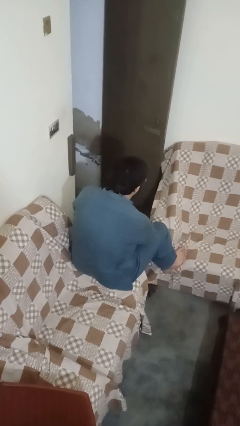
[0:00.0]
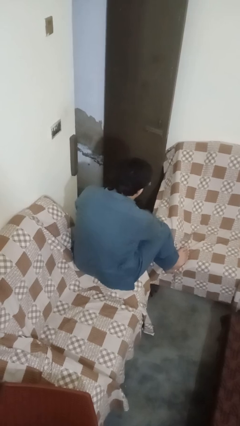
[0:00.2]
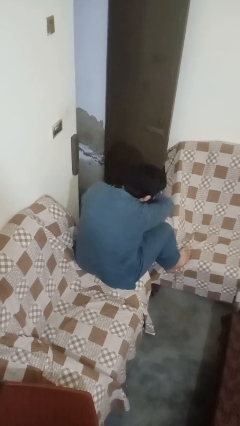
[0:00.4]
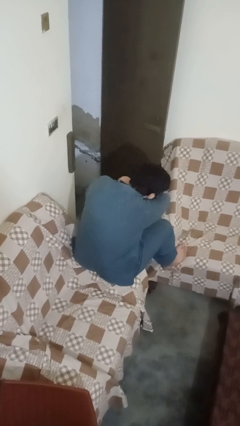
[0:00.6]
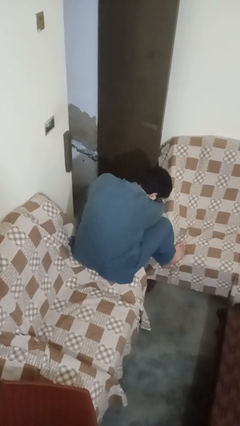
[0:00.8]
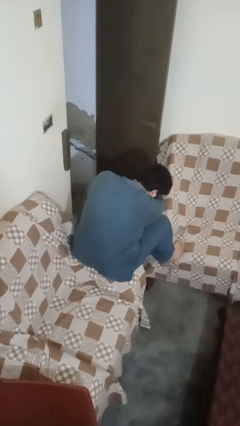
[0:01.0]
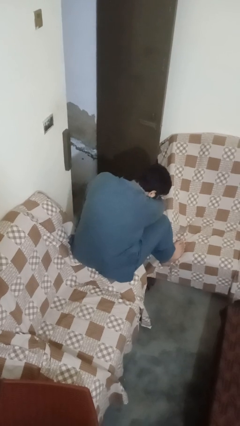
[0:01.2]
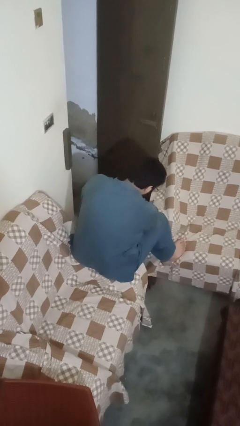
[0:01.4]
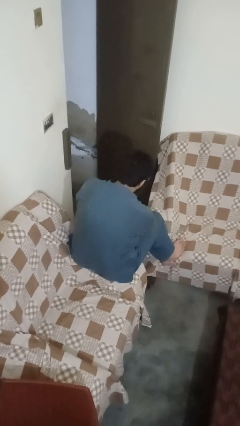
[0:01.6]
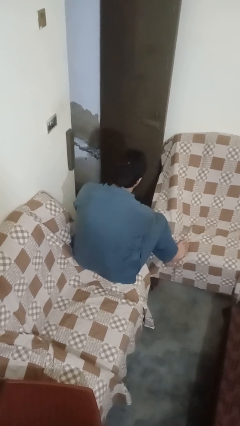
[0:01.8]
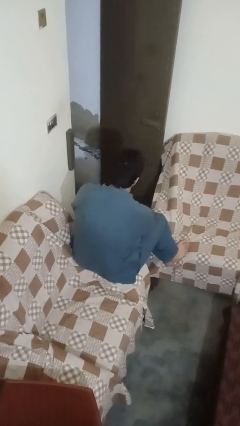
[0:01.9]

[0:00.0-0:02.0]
person sneezes into arm

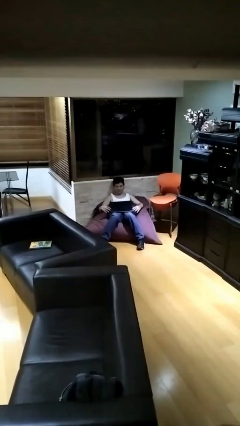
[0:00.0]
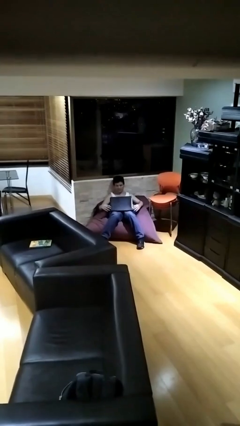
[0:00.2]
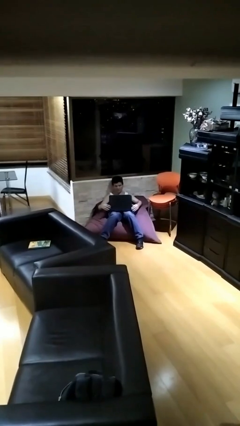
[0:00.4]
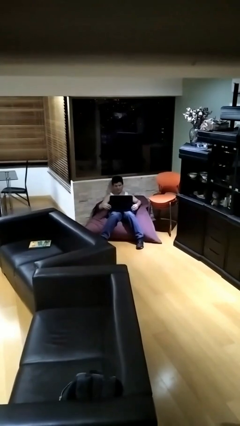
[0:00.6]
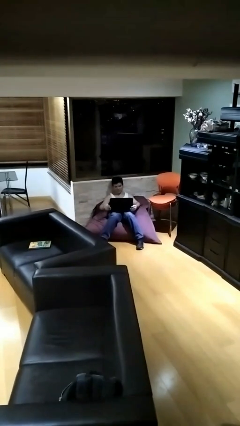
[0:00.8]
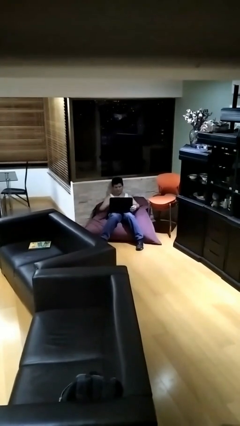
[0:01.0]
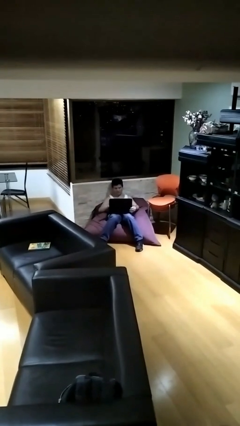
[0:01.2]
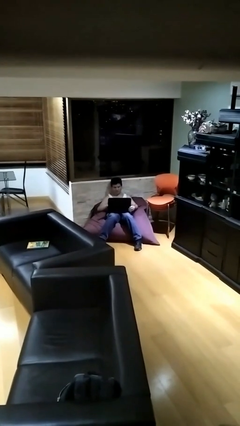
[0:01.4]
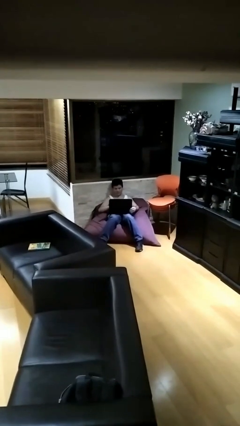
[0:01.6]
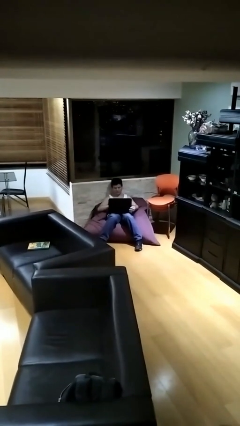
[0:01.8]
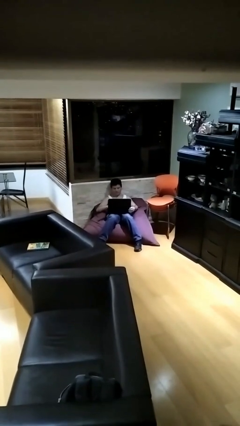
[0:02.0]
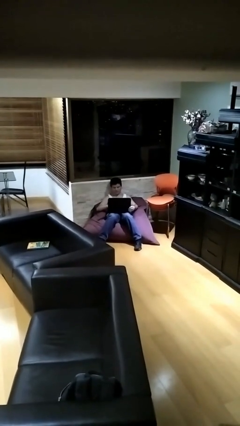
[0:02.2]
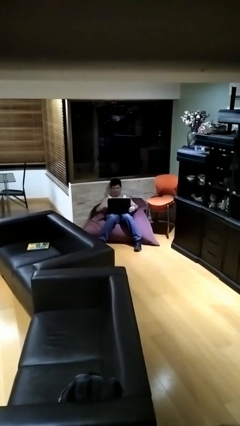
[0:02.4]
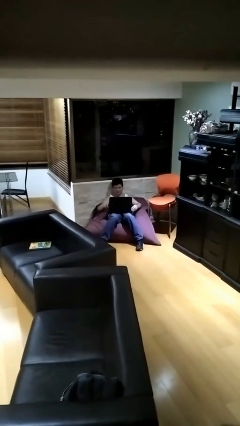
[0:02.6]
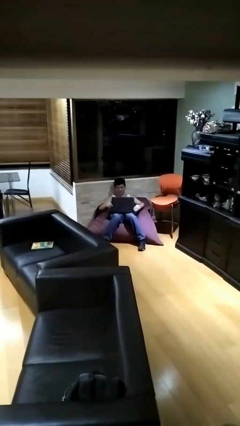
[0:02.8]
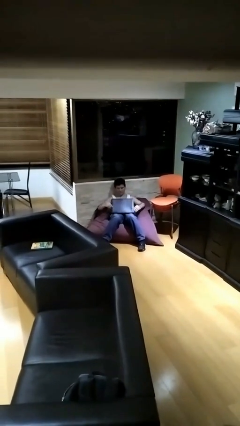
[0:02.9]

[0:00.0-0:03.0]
person interacts with laptop

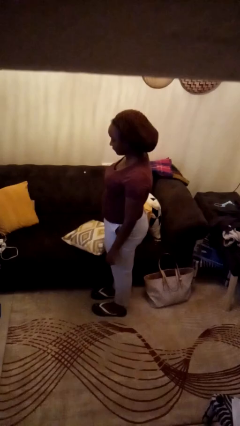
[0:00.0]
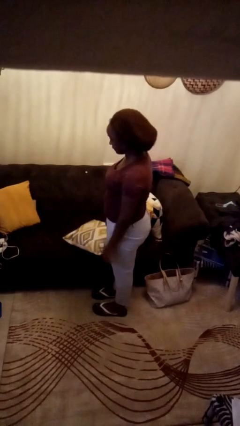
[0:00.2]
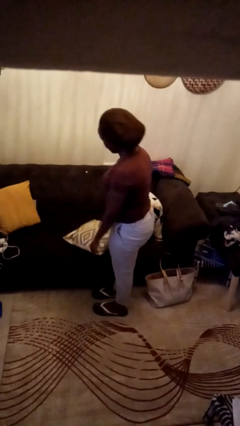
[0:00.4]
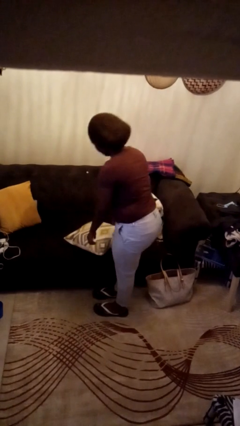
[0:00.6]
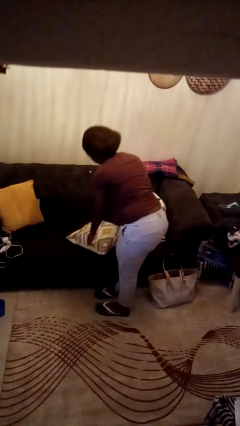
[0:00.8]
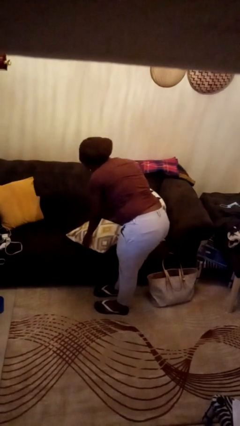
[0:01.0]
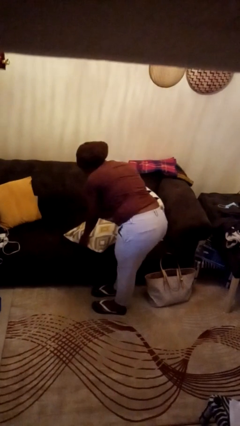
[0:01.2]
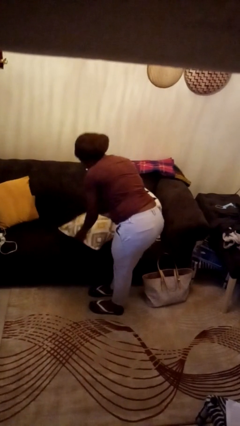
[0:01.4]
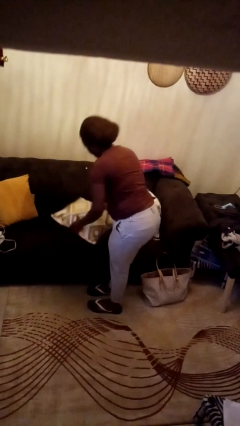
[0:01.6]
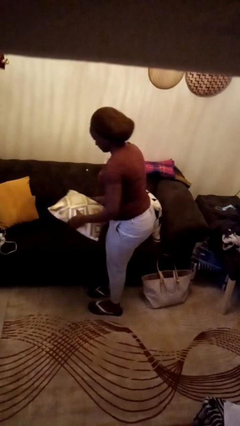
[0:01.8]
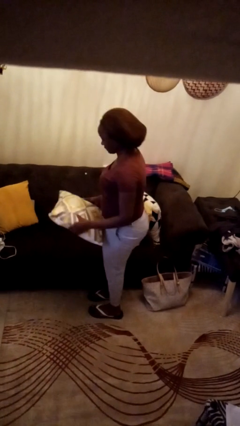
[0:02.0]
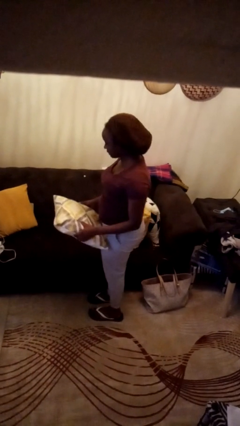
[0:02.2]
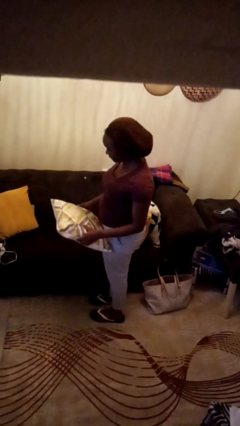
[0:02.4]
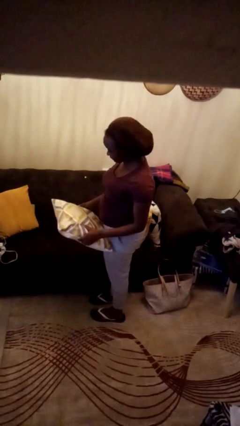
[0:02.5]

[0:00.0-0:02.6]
person picks up object from couch

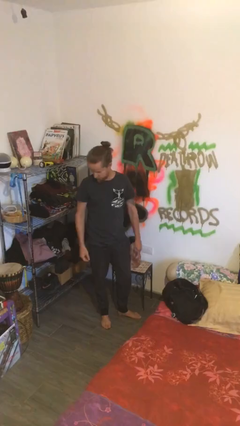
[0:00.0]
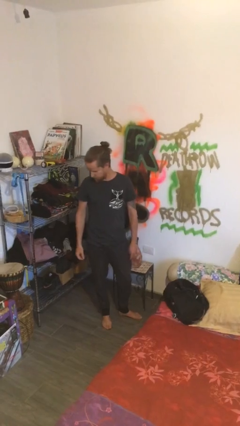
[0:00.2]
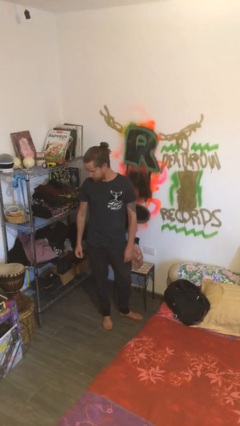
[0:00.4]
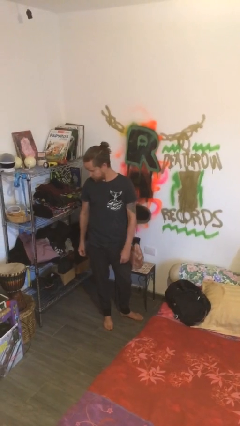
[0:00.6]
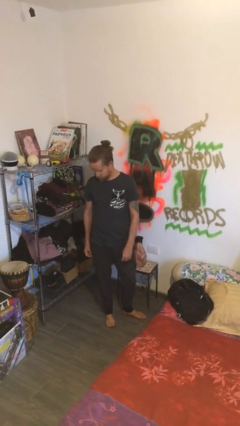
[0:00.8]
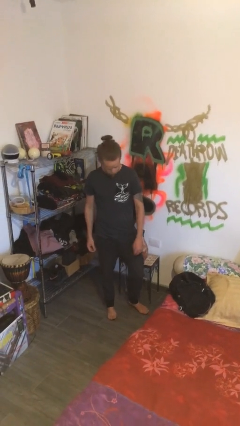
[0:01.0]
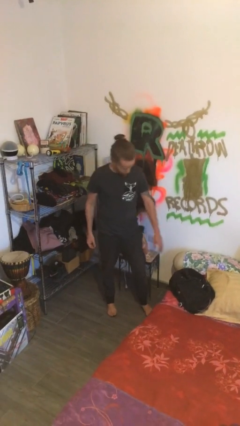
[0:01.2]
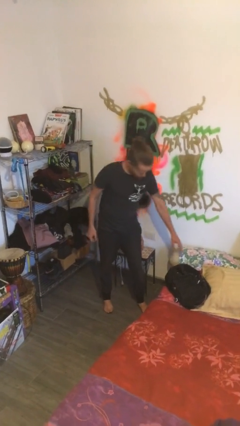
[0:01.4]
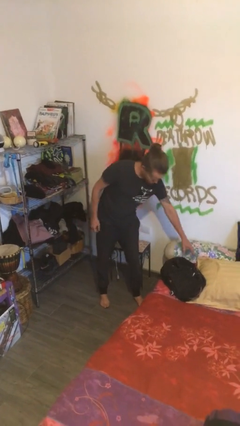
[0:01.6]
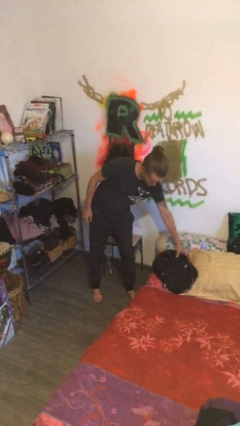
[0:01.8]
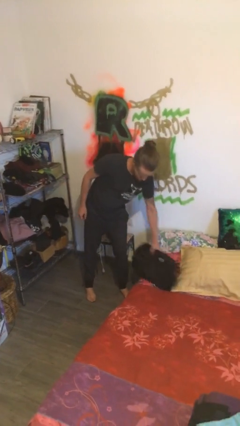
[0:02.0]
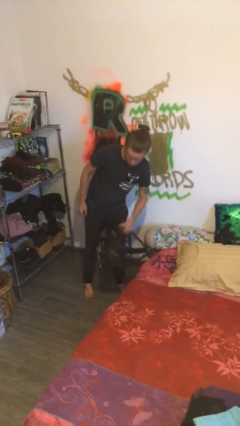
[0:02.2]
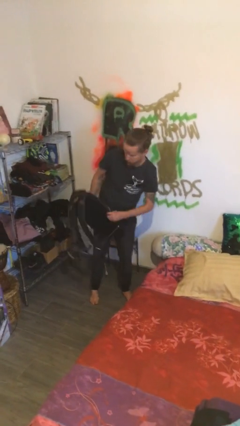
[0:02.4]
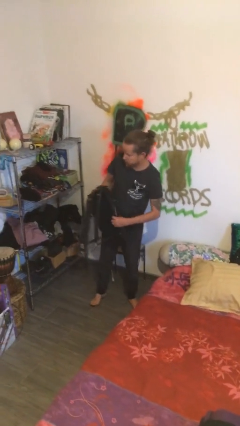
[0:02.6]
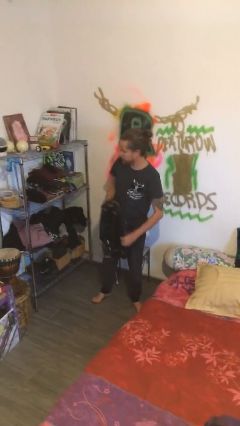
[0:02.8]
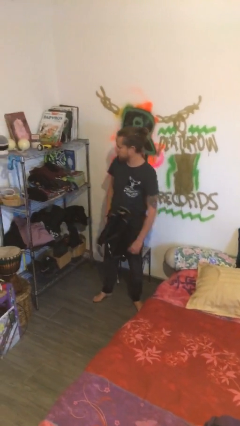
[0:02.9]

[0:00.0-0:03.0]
person picks up object from bed

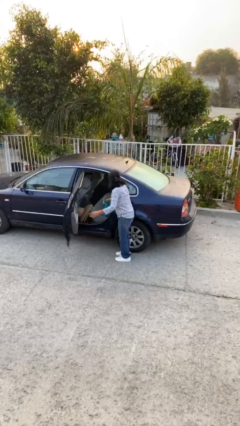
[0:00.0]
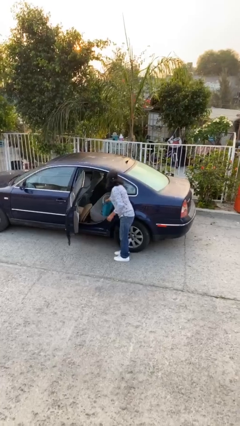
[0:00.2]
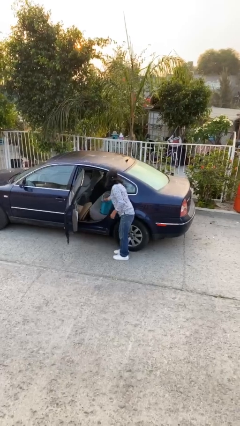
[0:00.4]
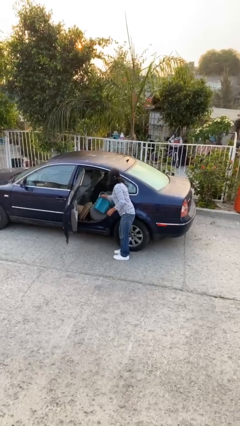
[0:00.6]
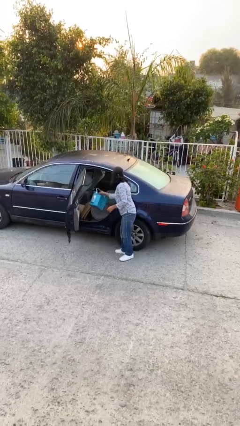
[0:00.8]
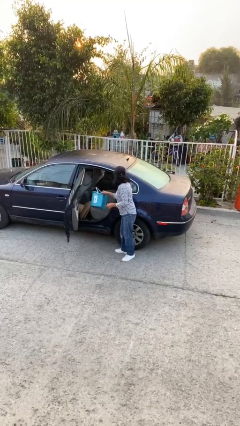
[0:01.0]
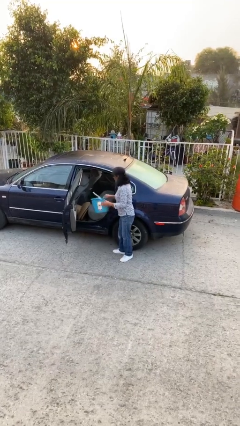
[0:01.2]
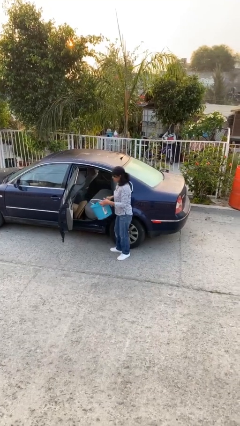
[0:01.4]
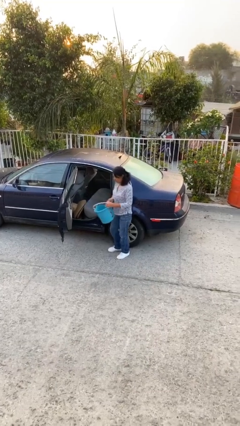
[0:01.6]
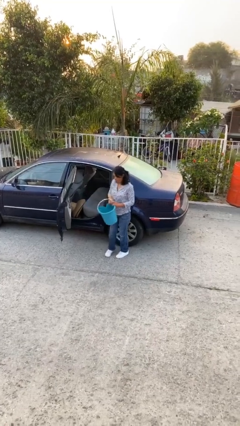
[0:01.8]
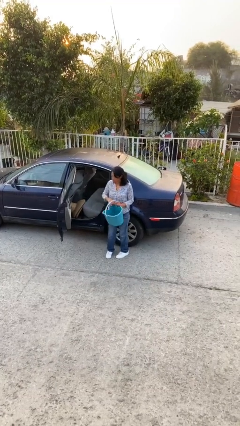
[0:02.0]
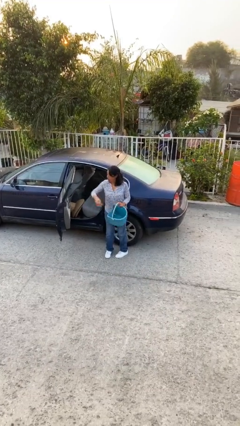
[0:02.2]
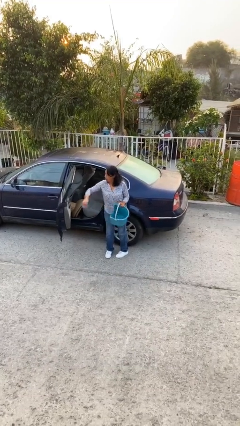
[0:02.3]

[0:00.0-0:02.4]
person unloads car

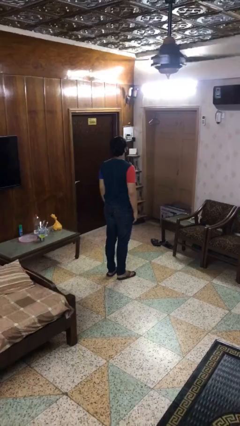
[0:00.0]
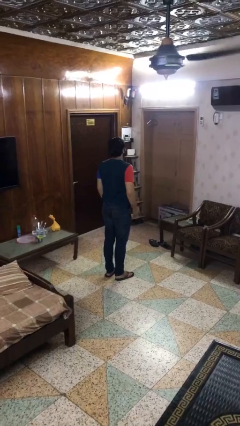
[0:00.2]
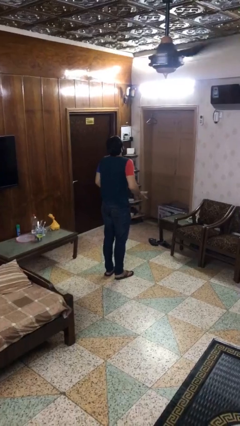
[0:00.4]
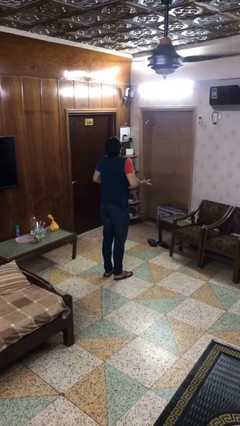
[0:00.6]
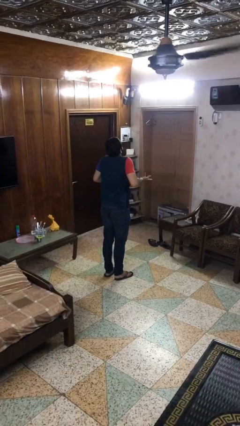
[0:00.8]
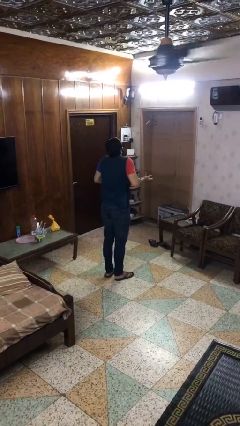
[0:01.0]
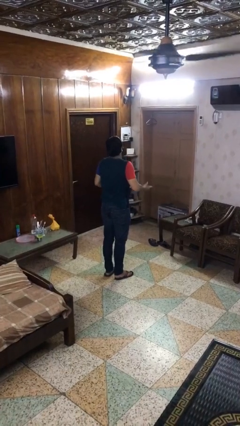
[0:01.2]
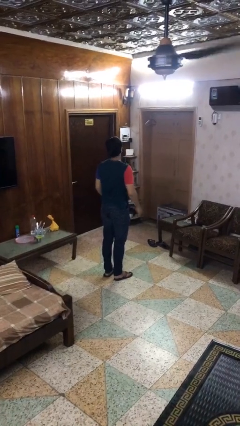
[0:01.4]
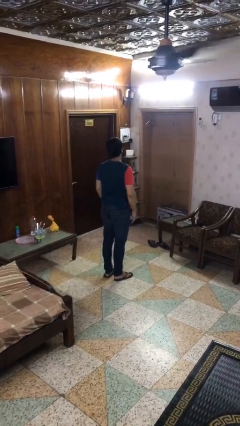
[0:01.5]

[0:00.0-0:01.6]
person shrugs

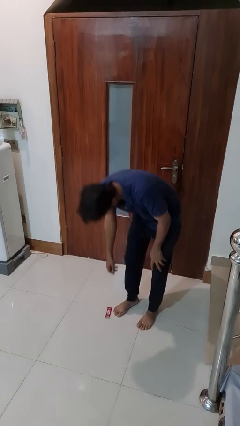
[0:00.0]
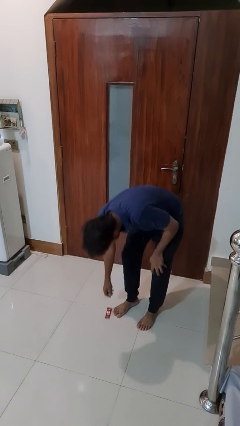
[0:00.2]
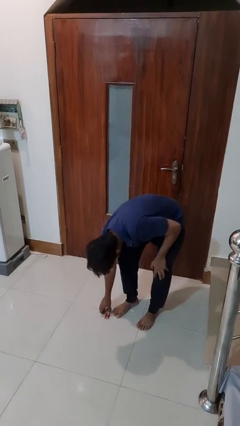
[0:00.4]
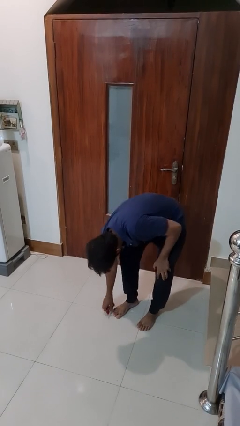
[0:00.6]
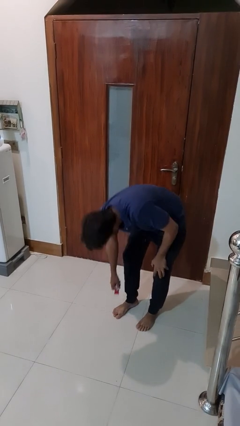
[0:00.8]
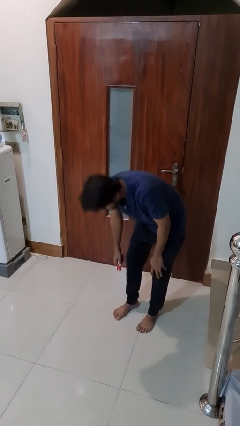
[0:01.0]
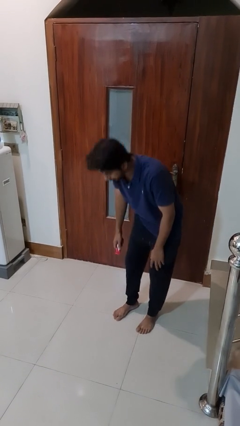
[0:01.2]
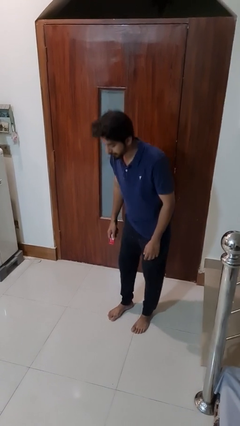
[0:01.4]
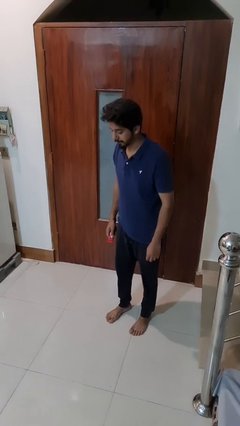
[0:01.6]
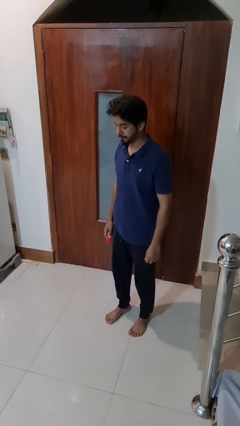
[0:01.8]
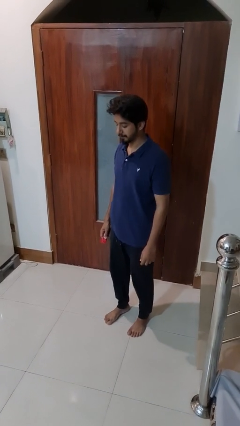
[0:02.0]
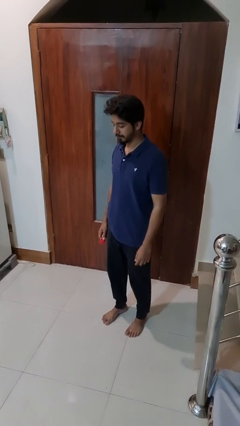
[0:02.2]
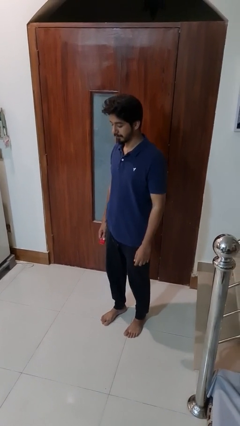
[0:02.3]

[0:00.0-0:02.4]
person picks up object from floor
